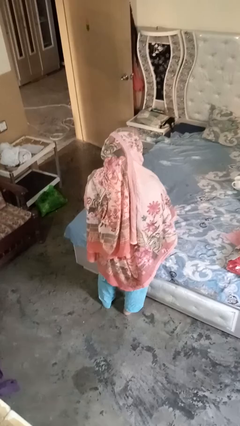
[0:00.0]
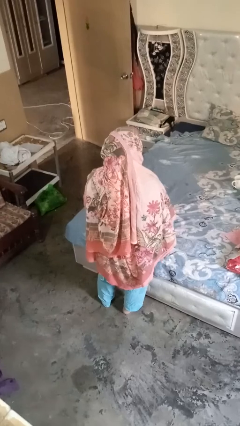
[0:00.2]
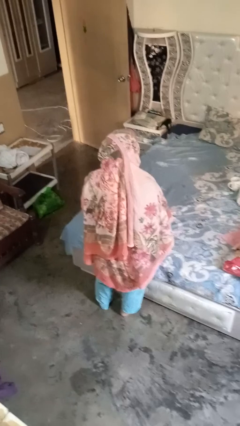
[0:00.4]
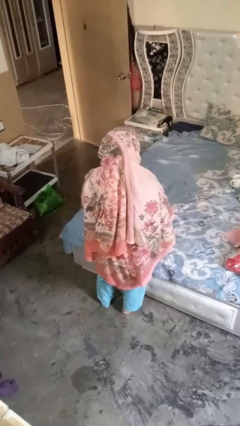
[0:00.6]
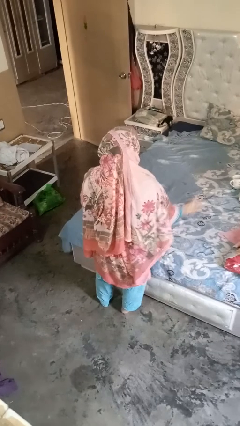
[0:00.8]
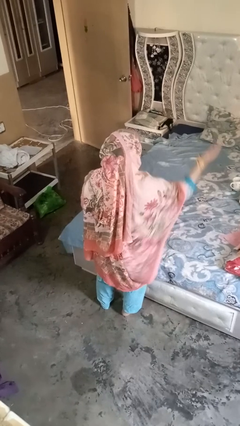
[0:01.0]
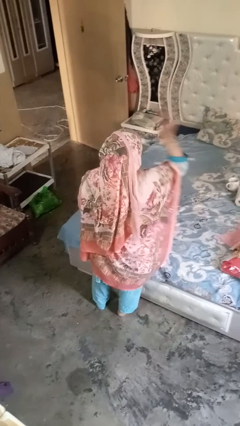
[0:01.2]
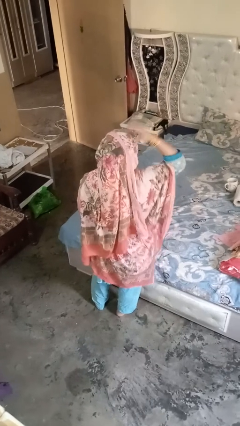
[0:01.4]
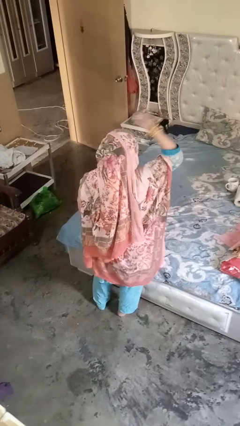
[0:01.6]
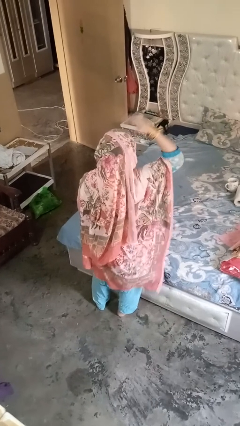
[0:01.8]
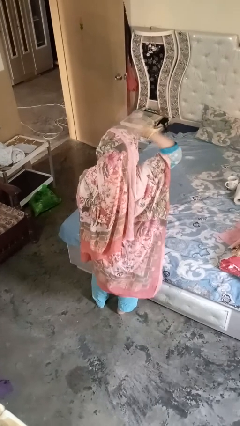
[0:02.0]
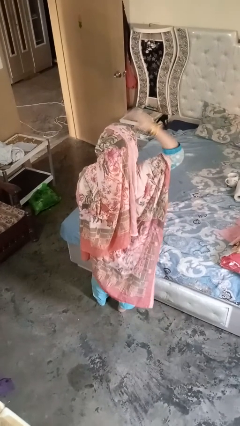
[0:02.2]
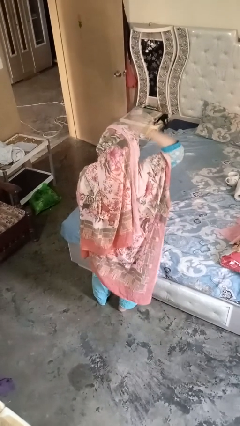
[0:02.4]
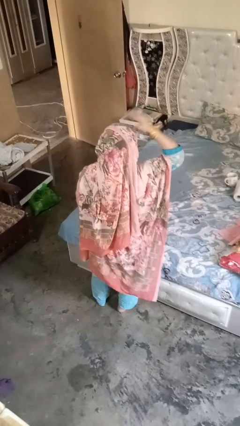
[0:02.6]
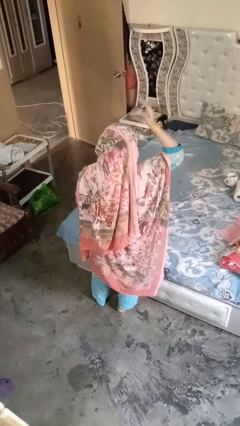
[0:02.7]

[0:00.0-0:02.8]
person pats head

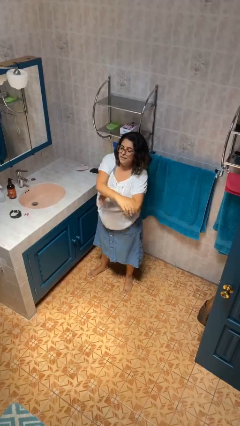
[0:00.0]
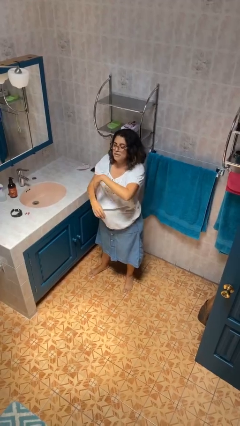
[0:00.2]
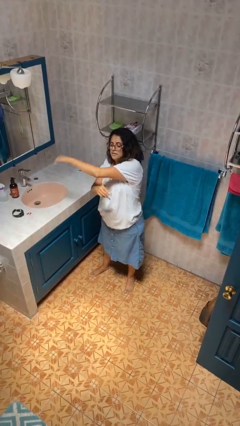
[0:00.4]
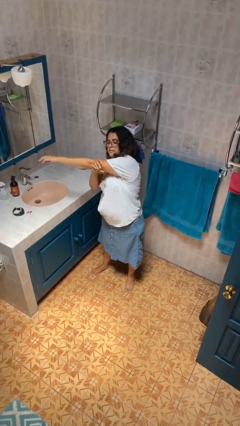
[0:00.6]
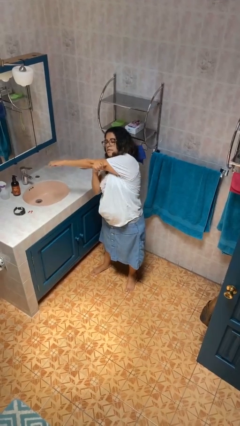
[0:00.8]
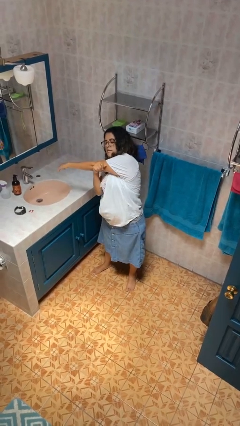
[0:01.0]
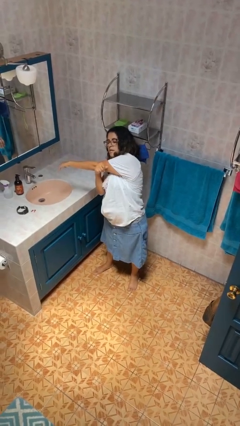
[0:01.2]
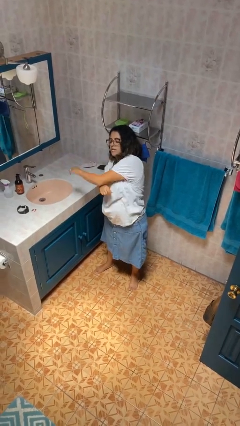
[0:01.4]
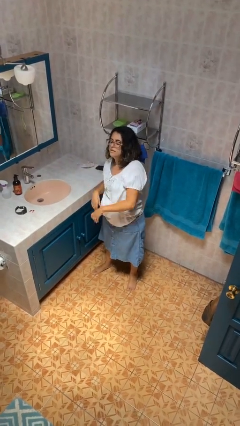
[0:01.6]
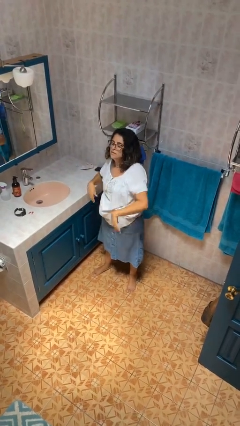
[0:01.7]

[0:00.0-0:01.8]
person stretches arms to side

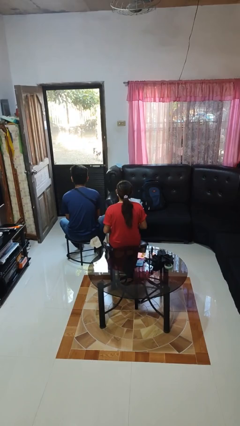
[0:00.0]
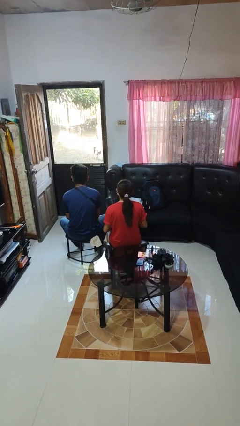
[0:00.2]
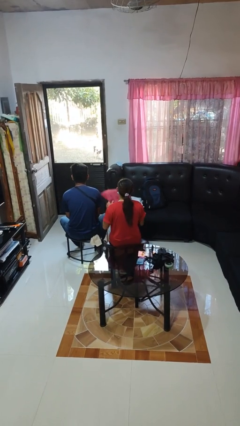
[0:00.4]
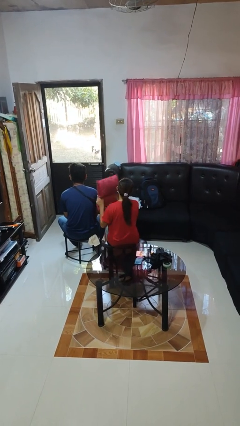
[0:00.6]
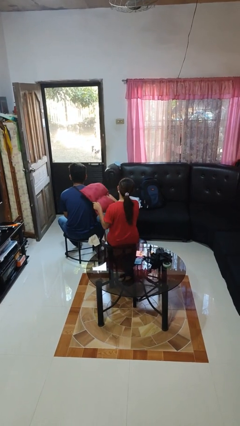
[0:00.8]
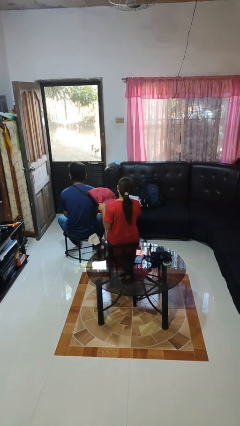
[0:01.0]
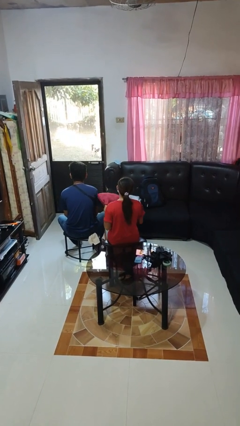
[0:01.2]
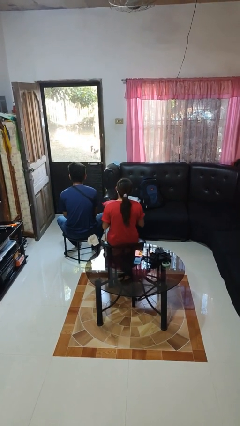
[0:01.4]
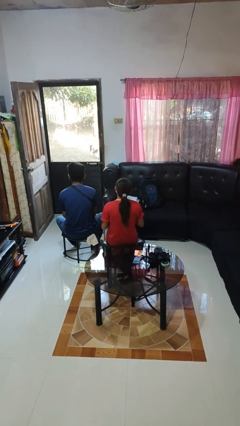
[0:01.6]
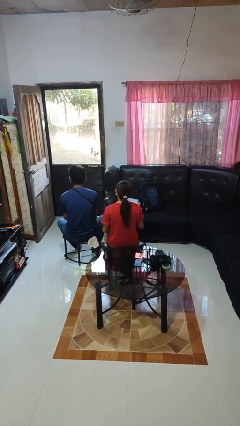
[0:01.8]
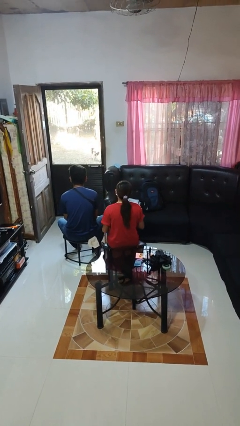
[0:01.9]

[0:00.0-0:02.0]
person hits person with pillow

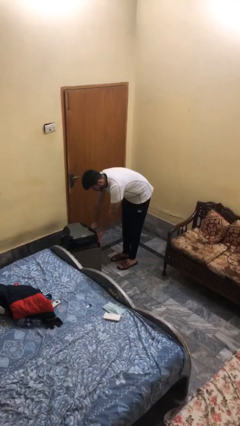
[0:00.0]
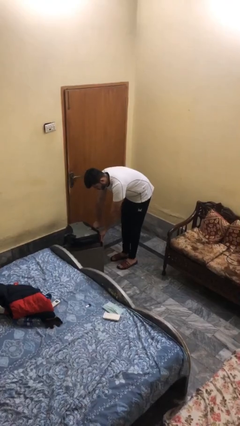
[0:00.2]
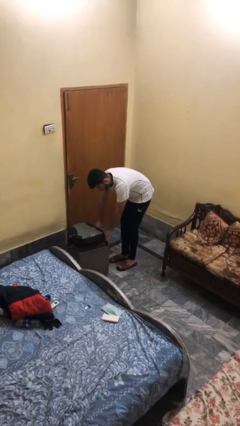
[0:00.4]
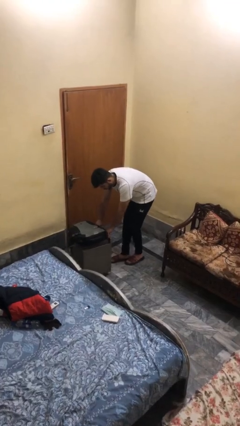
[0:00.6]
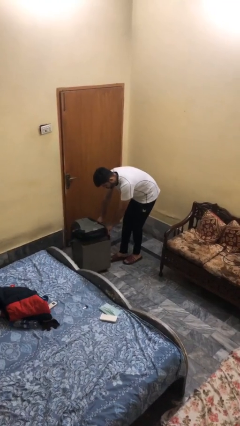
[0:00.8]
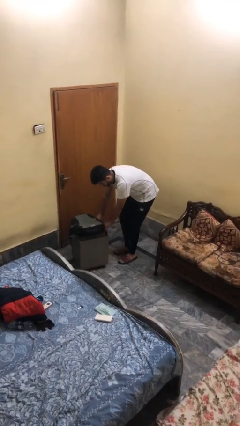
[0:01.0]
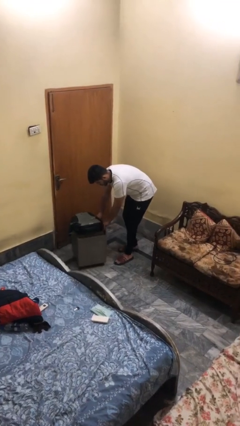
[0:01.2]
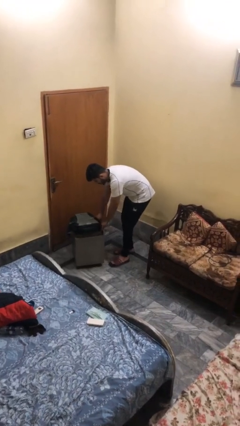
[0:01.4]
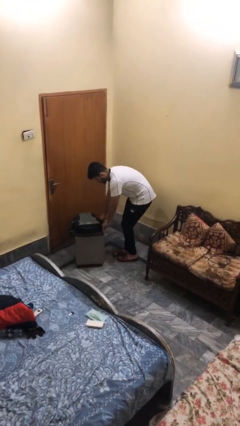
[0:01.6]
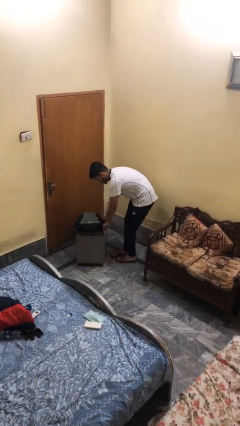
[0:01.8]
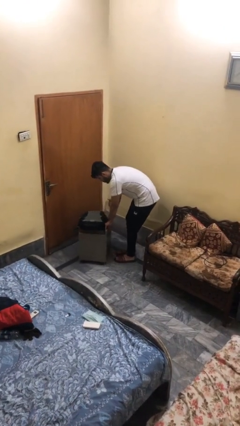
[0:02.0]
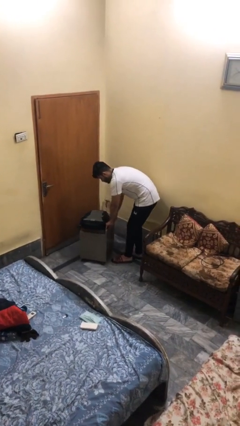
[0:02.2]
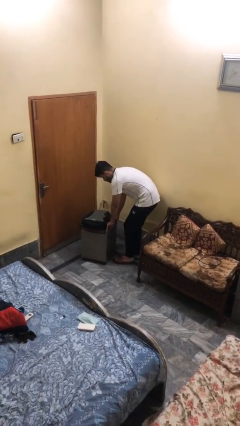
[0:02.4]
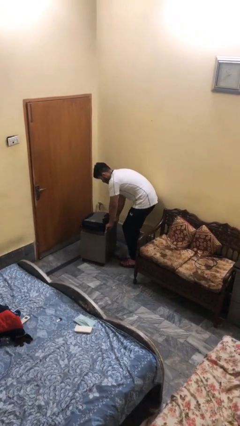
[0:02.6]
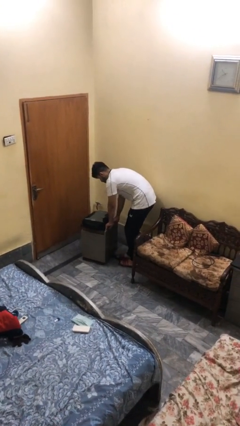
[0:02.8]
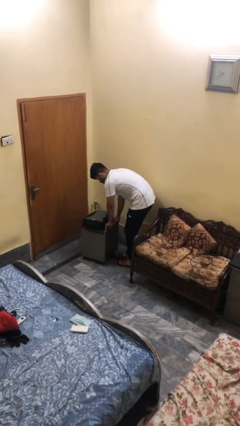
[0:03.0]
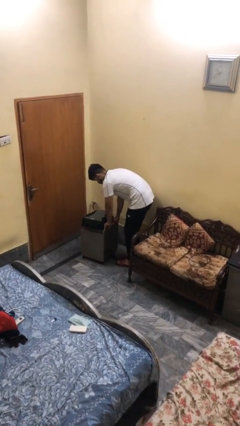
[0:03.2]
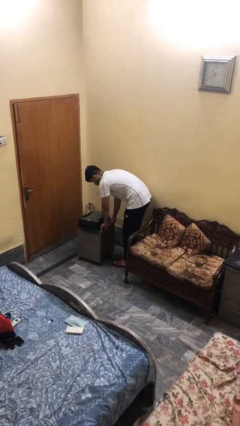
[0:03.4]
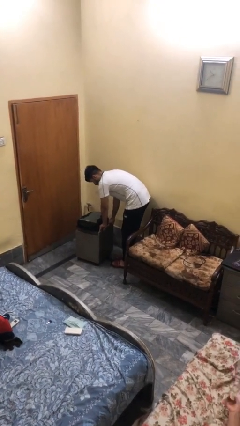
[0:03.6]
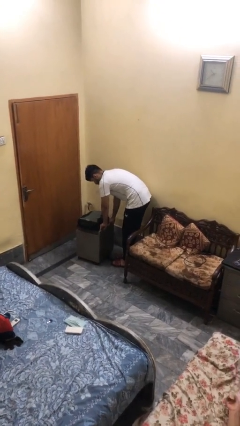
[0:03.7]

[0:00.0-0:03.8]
person pulls wheeled cart

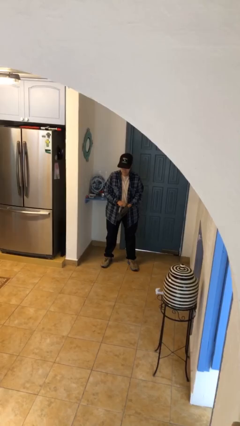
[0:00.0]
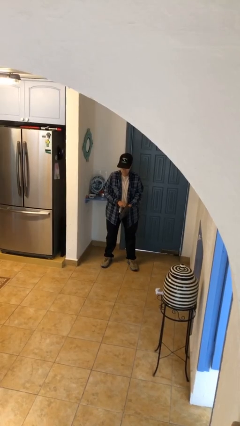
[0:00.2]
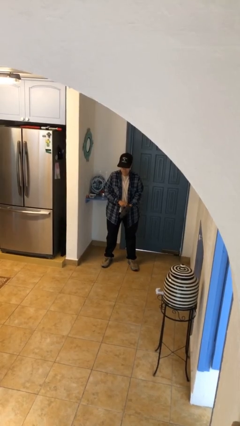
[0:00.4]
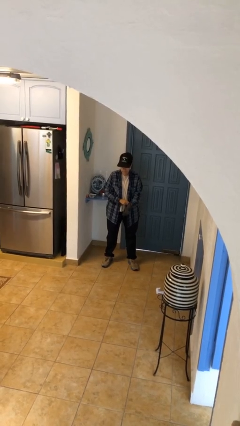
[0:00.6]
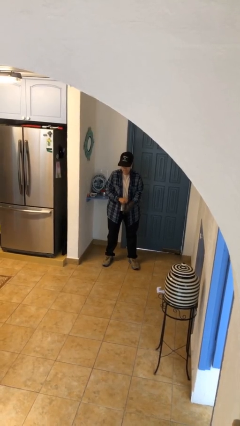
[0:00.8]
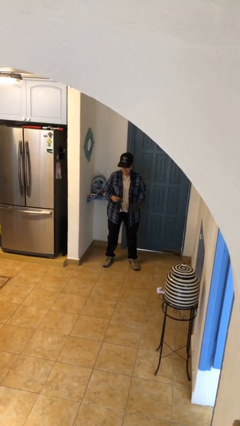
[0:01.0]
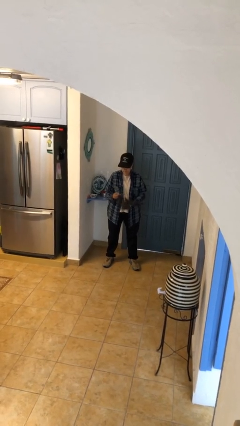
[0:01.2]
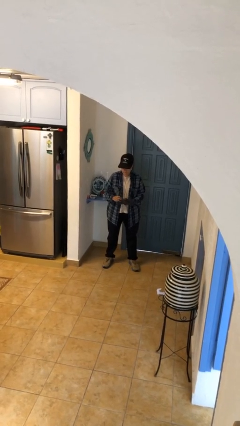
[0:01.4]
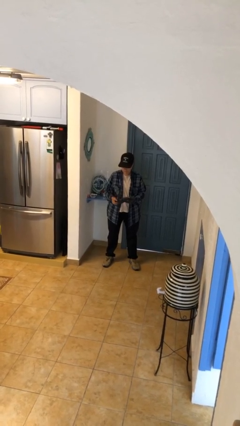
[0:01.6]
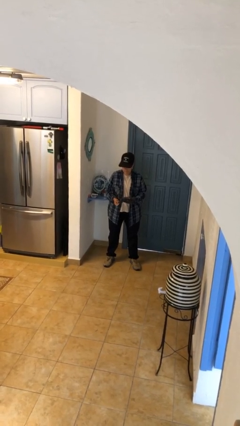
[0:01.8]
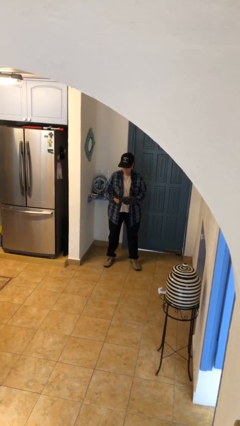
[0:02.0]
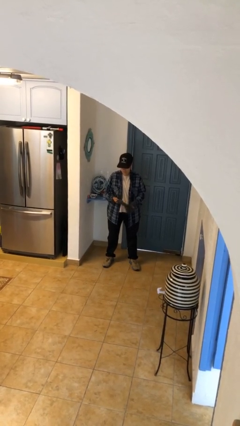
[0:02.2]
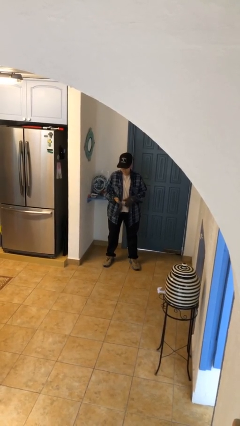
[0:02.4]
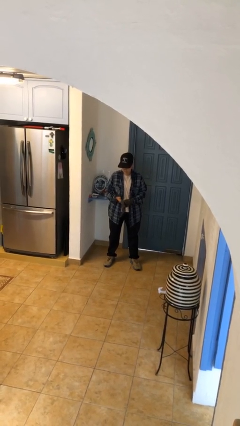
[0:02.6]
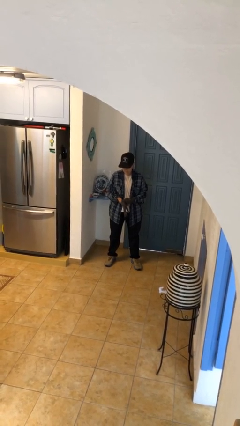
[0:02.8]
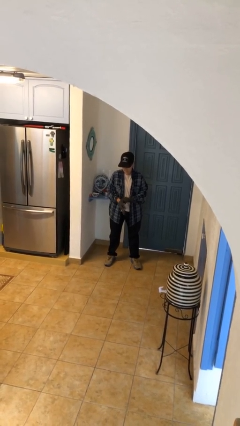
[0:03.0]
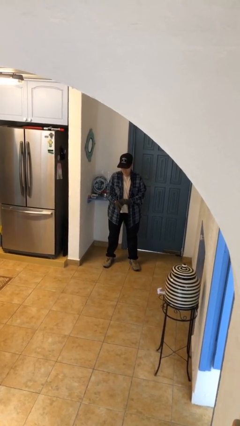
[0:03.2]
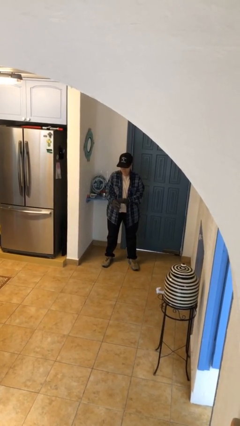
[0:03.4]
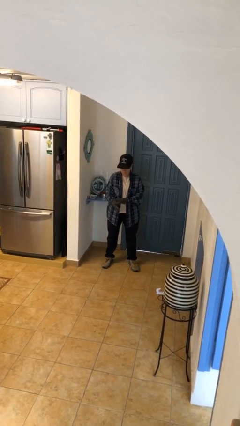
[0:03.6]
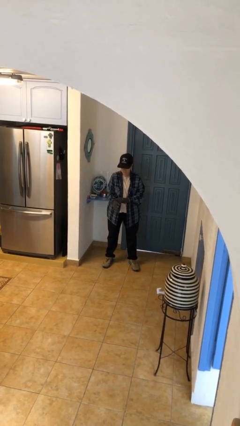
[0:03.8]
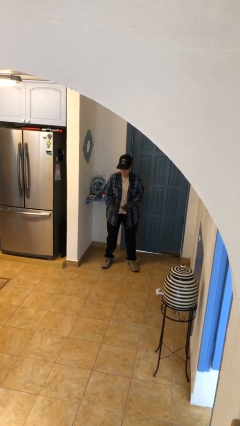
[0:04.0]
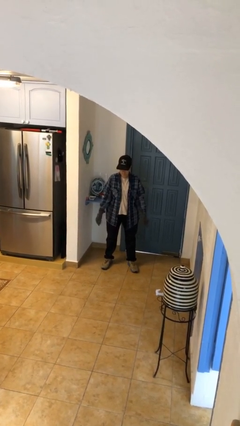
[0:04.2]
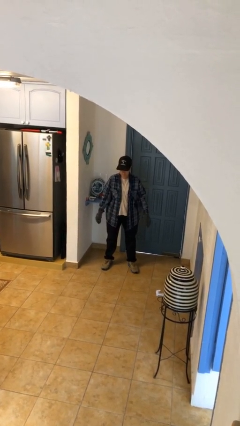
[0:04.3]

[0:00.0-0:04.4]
person puts on gloves

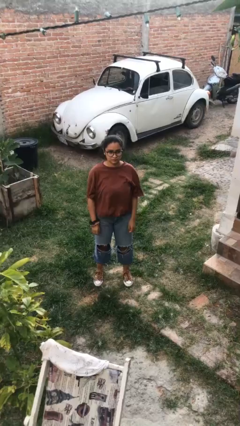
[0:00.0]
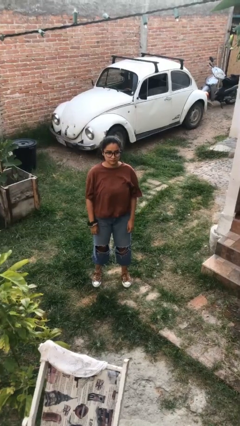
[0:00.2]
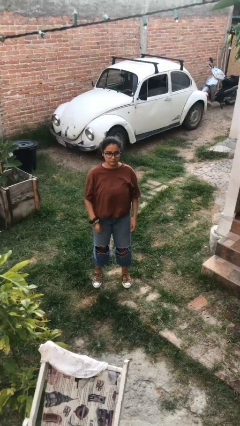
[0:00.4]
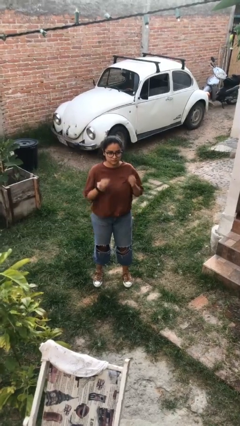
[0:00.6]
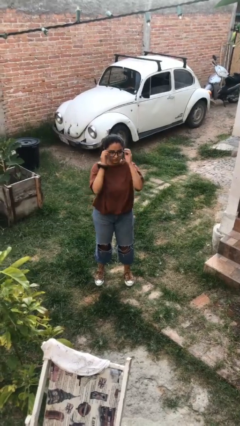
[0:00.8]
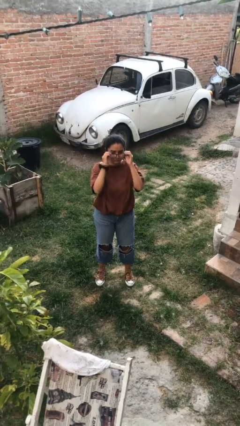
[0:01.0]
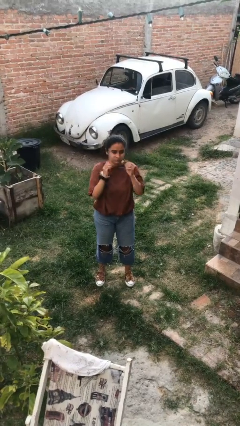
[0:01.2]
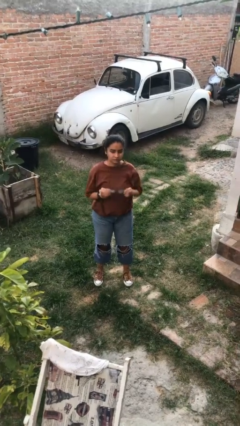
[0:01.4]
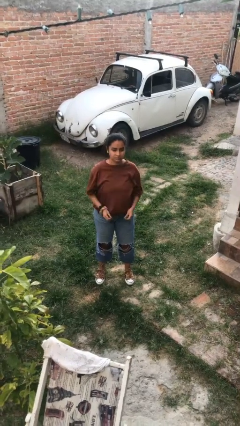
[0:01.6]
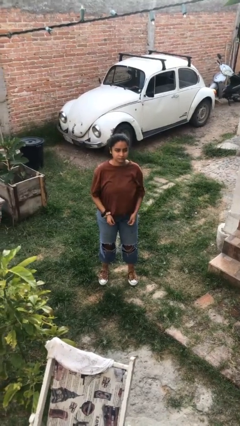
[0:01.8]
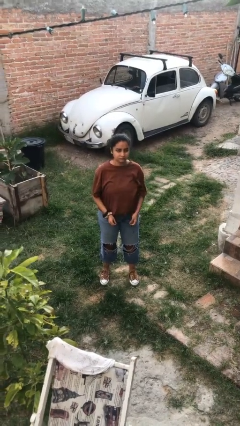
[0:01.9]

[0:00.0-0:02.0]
person takes off glasses

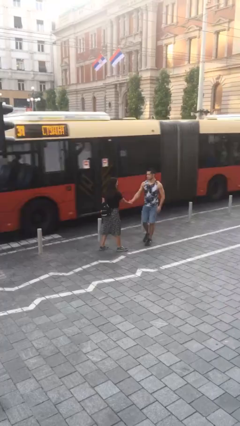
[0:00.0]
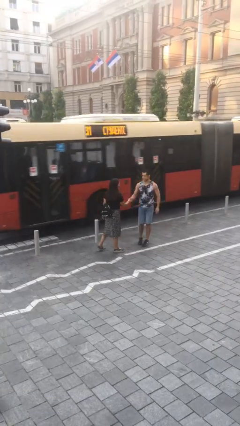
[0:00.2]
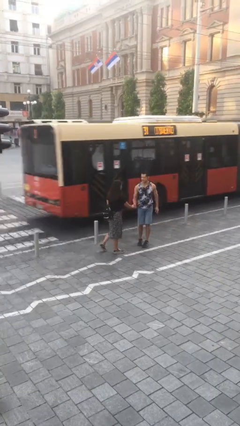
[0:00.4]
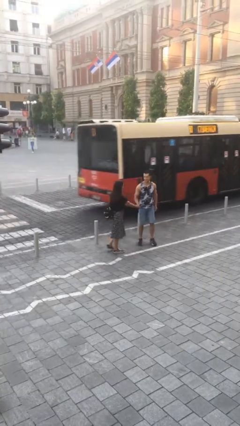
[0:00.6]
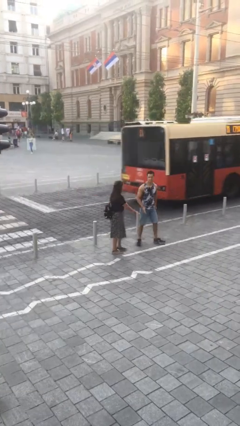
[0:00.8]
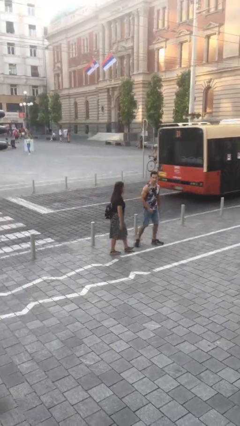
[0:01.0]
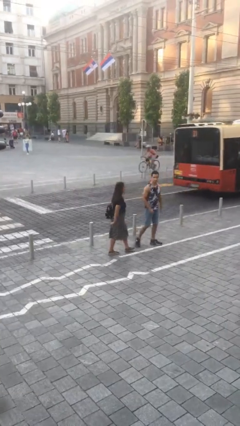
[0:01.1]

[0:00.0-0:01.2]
person shakes hand
